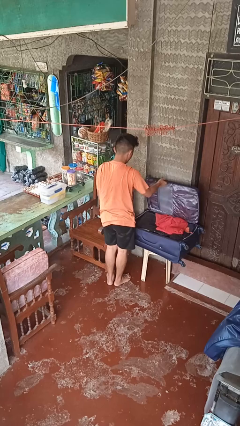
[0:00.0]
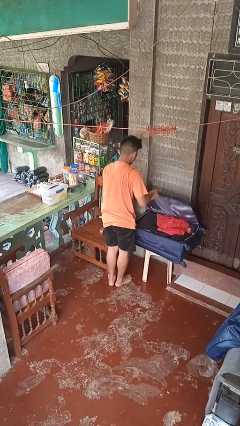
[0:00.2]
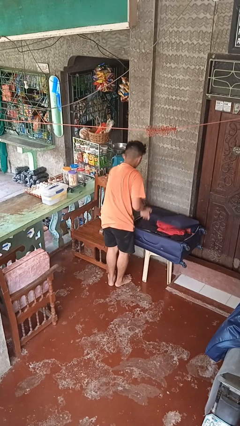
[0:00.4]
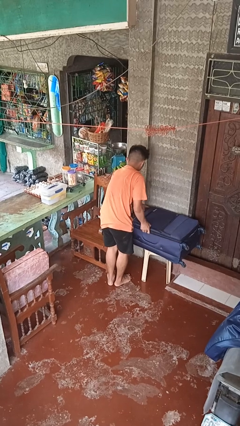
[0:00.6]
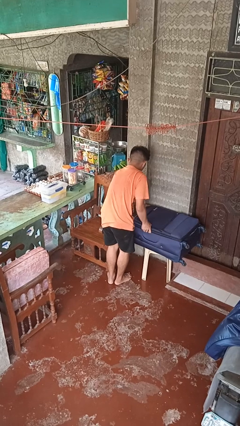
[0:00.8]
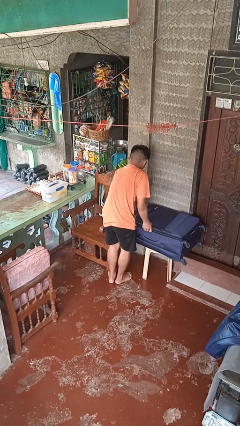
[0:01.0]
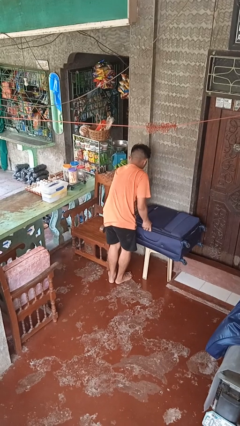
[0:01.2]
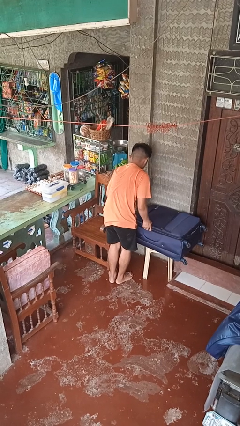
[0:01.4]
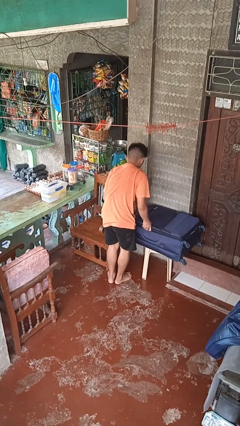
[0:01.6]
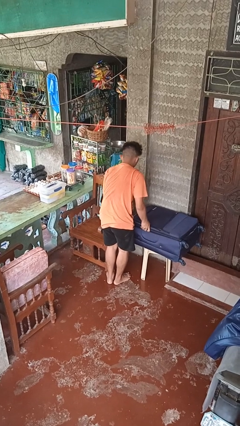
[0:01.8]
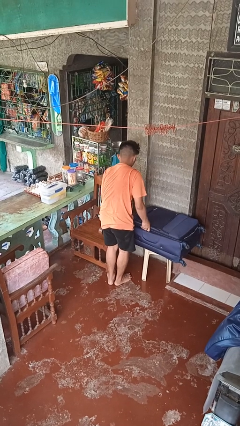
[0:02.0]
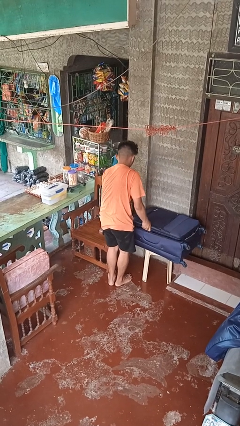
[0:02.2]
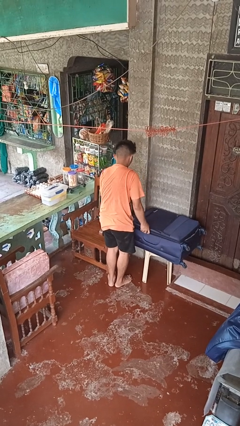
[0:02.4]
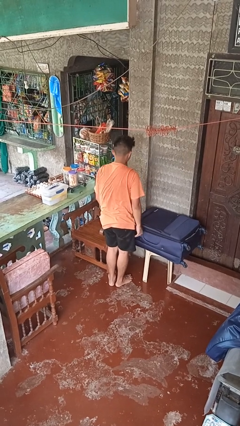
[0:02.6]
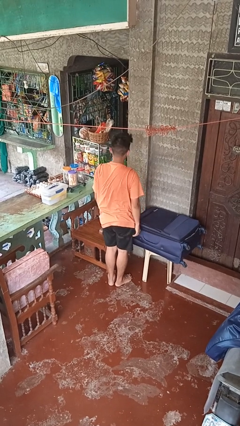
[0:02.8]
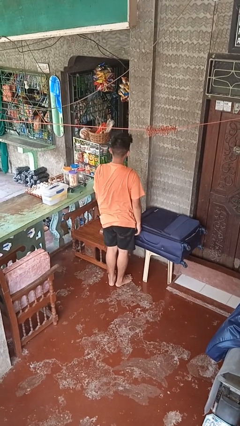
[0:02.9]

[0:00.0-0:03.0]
person closes suitcase

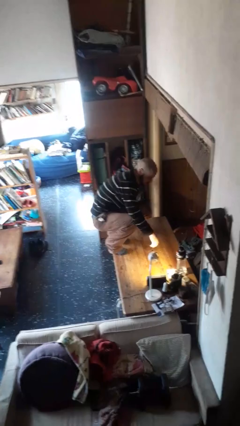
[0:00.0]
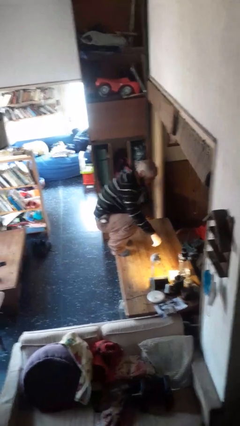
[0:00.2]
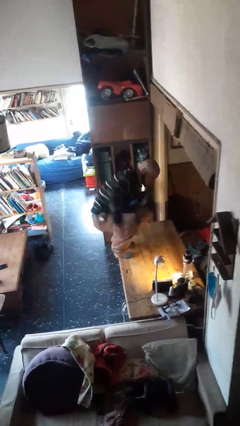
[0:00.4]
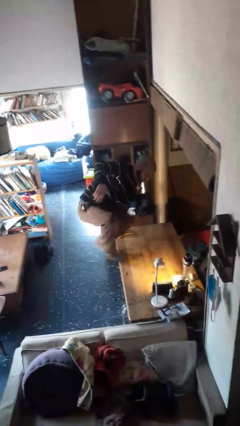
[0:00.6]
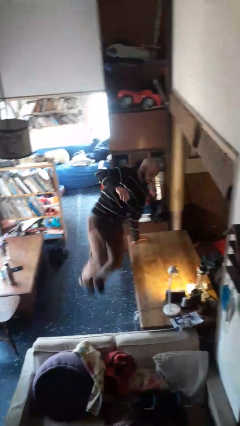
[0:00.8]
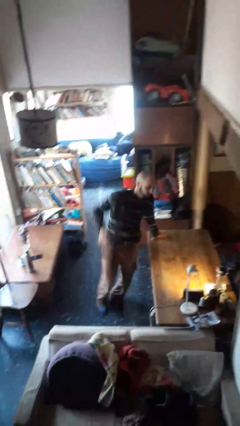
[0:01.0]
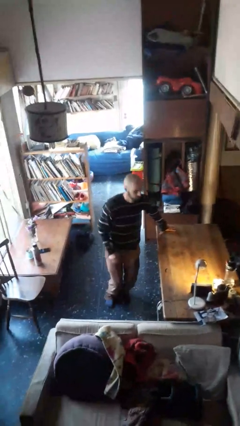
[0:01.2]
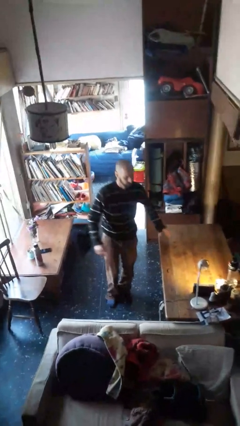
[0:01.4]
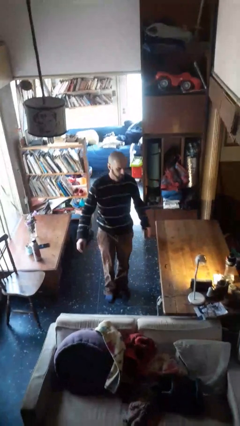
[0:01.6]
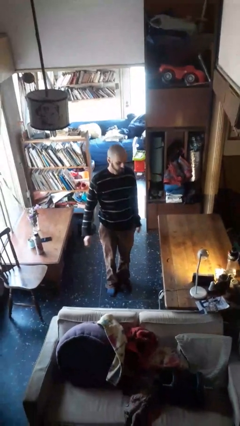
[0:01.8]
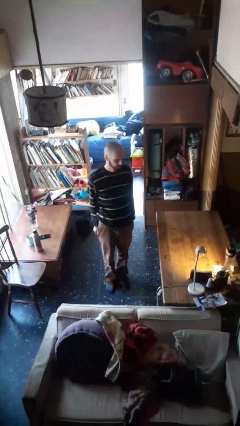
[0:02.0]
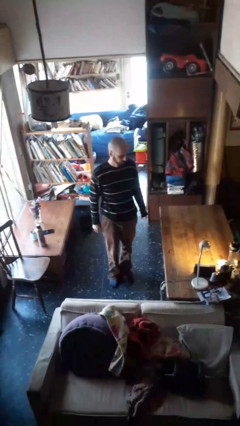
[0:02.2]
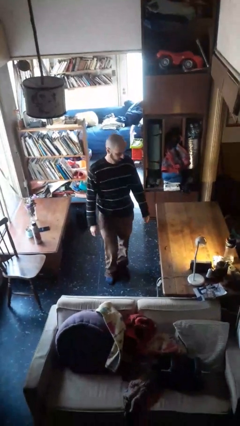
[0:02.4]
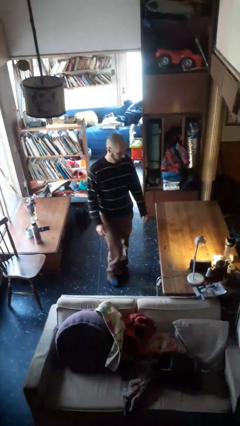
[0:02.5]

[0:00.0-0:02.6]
person climbs off table

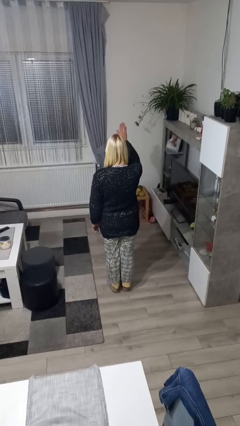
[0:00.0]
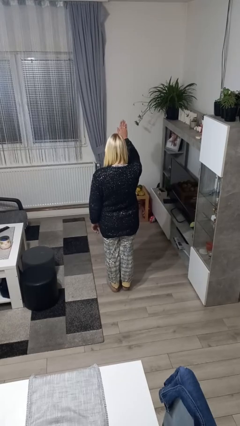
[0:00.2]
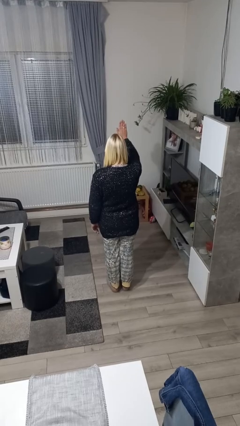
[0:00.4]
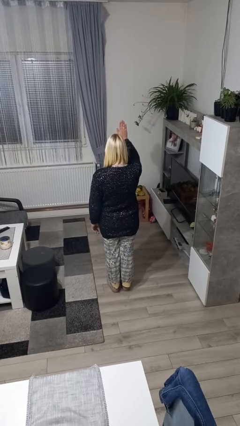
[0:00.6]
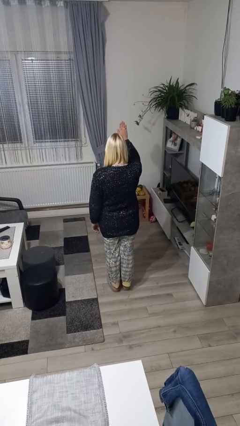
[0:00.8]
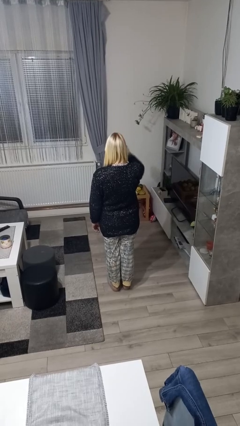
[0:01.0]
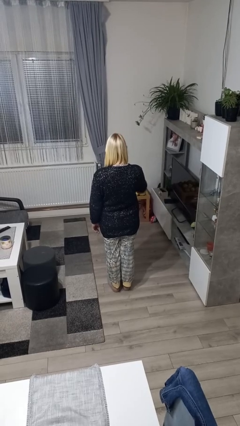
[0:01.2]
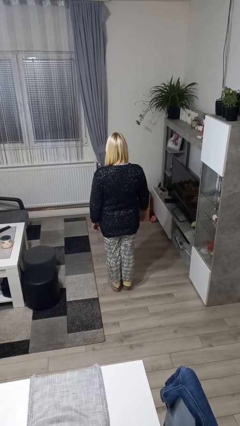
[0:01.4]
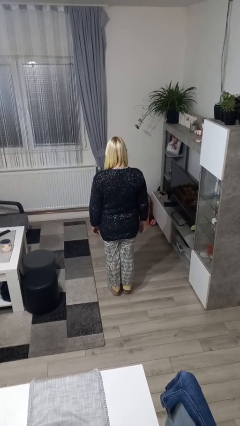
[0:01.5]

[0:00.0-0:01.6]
person gestures stop

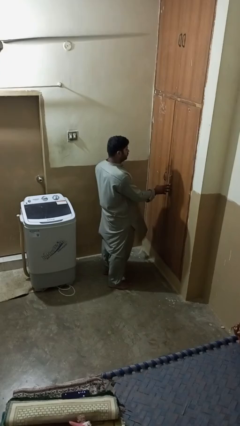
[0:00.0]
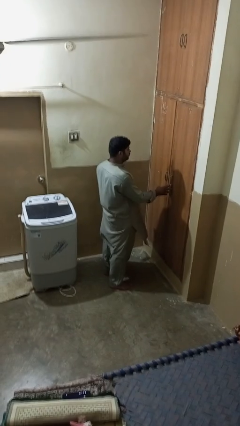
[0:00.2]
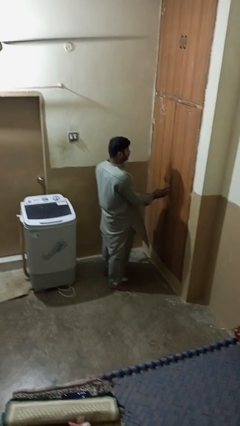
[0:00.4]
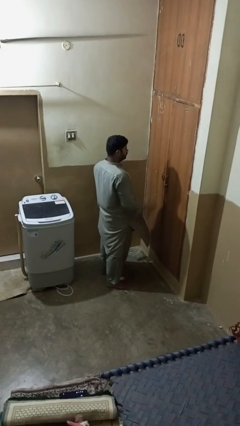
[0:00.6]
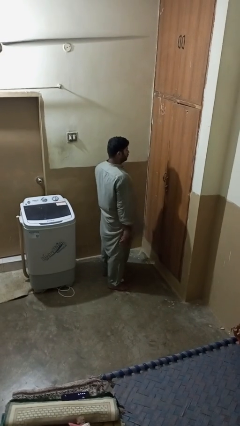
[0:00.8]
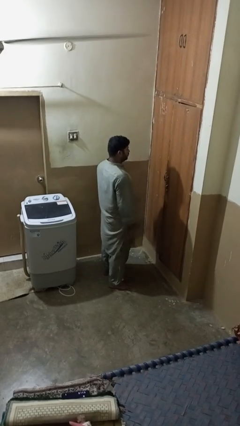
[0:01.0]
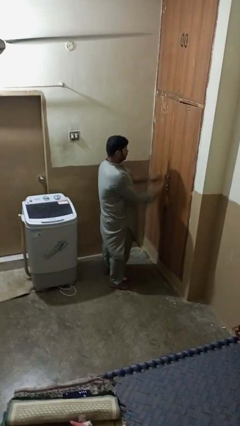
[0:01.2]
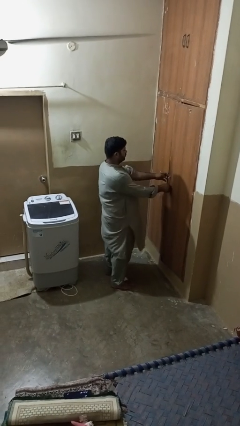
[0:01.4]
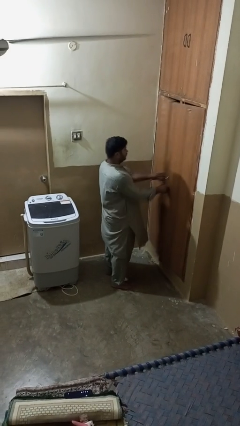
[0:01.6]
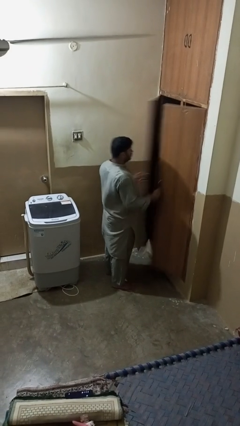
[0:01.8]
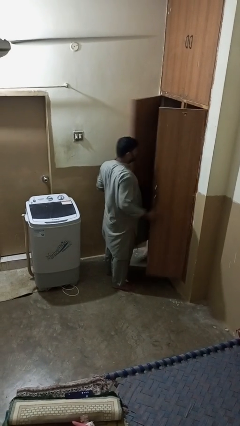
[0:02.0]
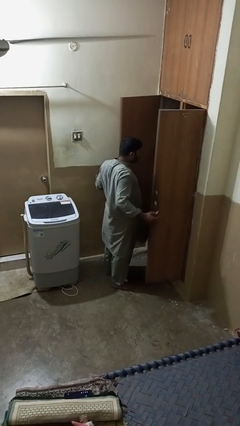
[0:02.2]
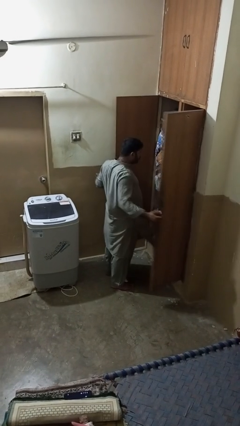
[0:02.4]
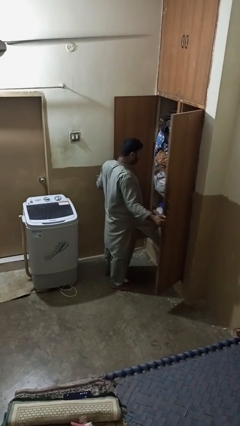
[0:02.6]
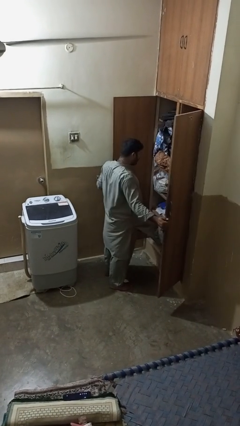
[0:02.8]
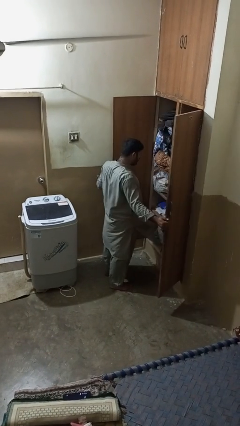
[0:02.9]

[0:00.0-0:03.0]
person opens closet door

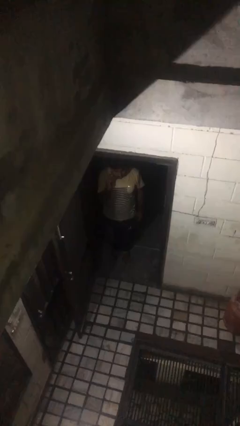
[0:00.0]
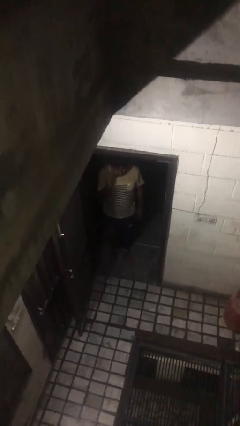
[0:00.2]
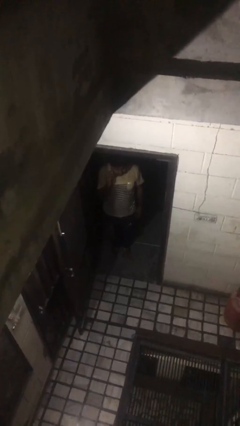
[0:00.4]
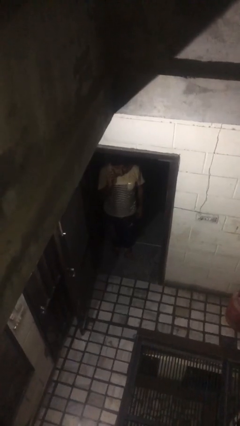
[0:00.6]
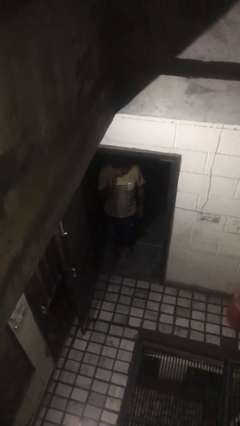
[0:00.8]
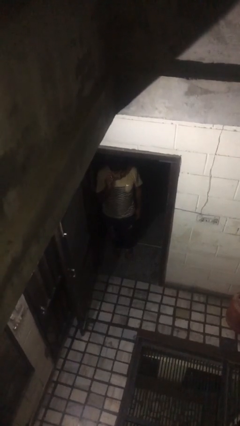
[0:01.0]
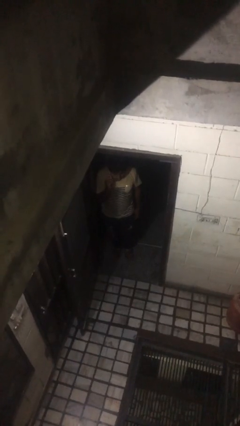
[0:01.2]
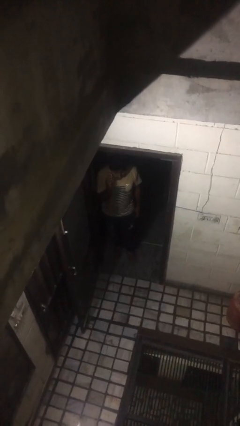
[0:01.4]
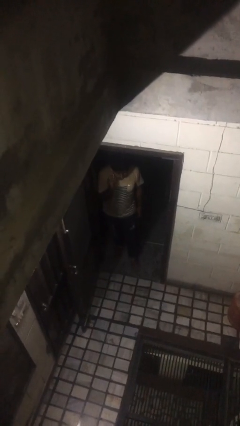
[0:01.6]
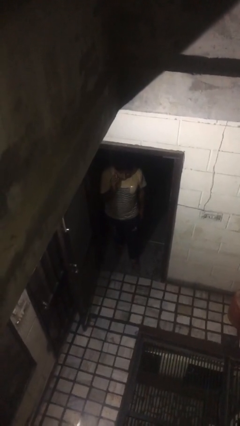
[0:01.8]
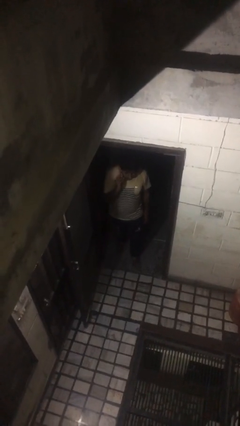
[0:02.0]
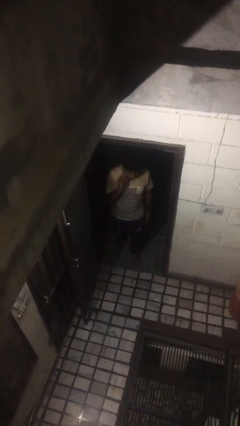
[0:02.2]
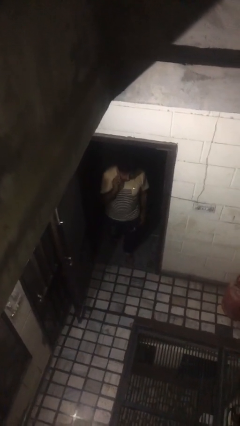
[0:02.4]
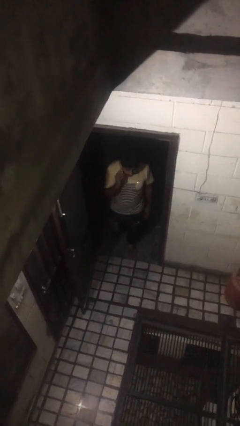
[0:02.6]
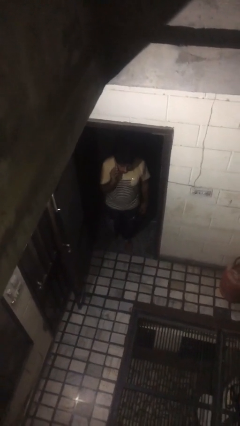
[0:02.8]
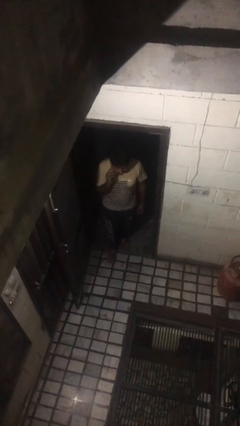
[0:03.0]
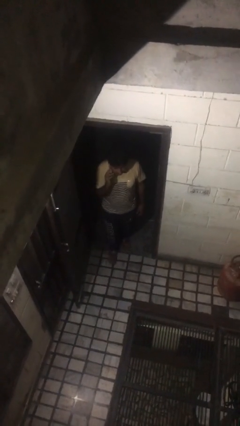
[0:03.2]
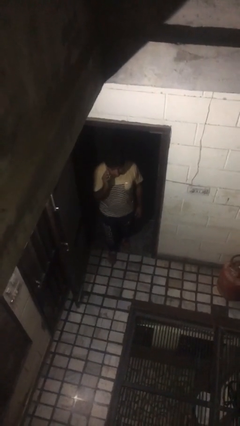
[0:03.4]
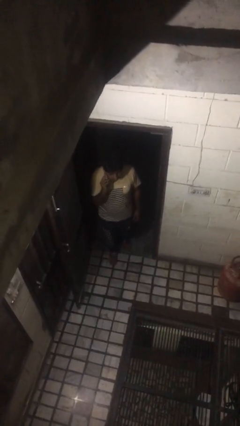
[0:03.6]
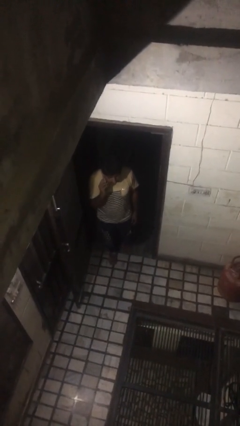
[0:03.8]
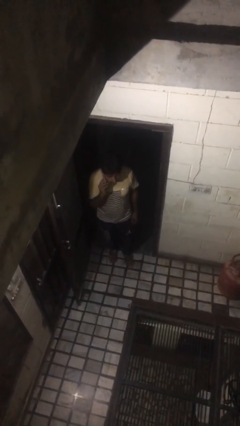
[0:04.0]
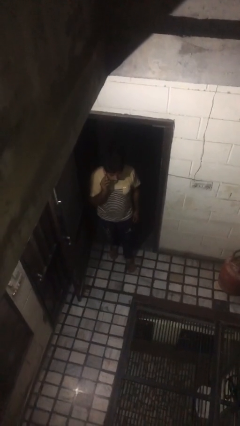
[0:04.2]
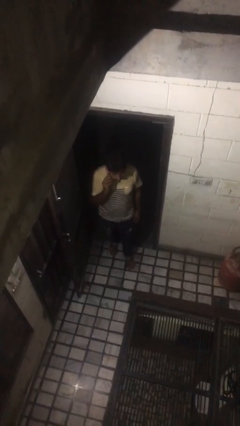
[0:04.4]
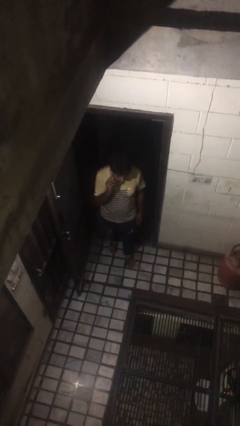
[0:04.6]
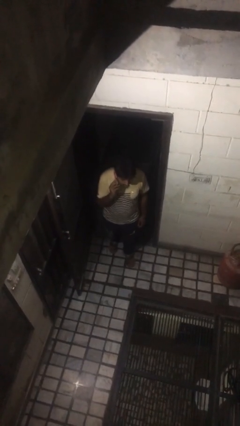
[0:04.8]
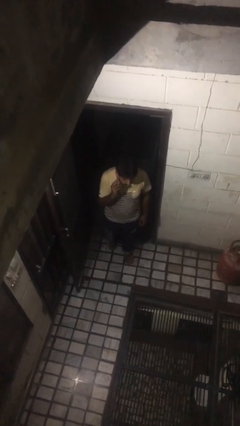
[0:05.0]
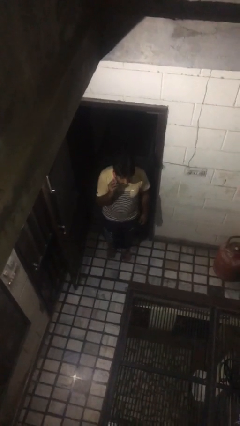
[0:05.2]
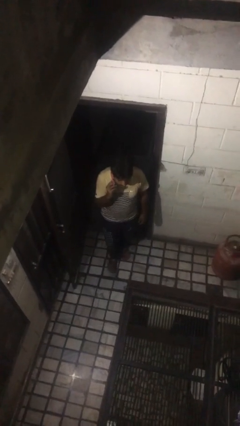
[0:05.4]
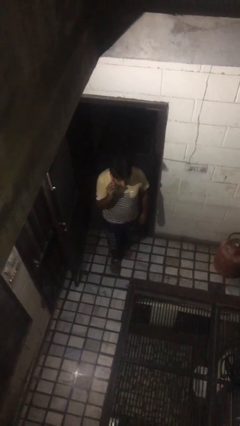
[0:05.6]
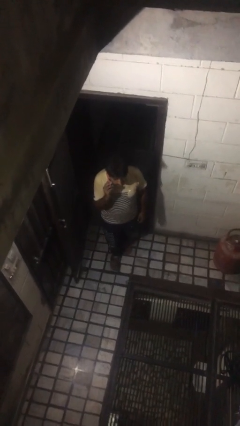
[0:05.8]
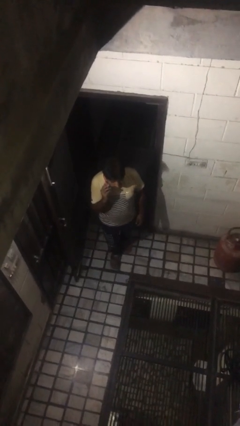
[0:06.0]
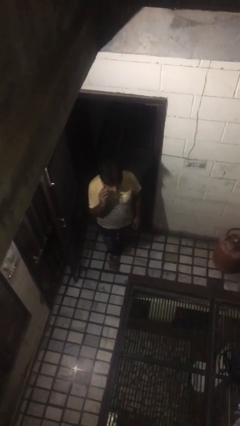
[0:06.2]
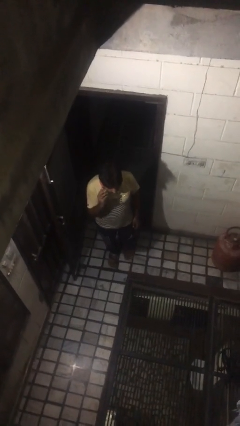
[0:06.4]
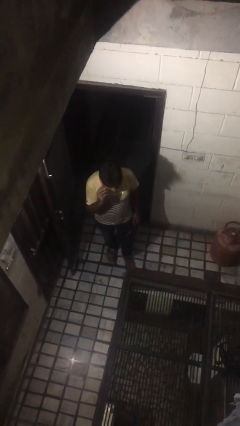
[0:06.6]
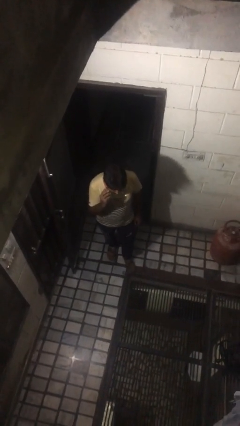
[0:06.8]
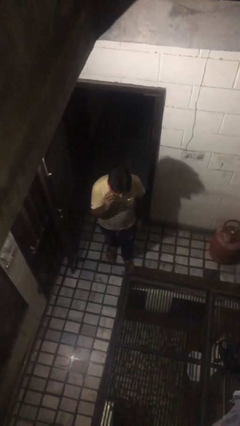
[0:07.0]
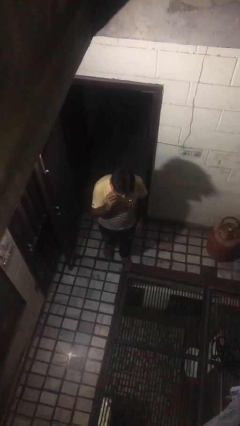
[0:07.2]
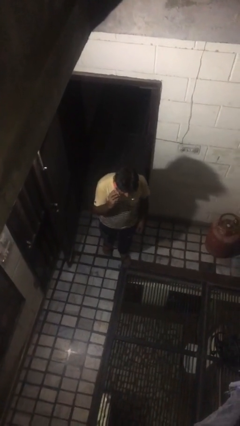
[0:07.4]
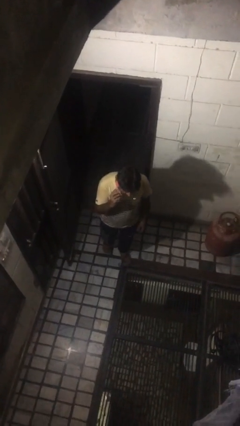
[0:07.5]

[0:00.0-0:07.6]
person enters scene through structure
